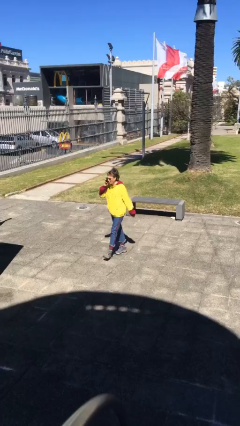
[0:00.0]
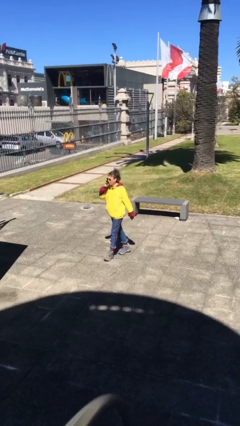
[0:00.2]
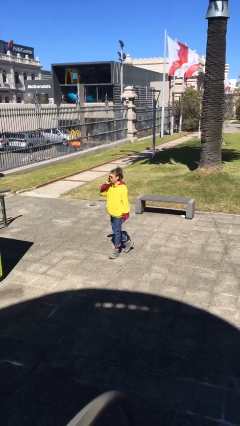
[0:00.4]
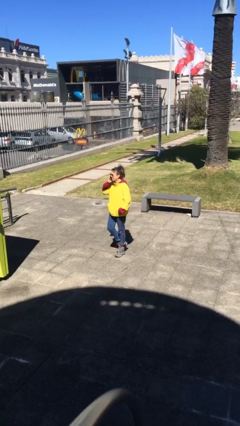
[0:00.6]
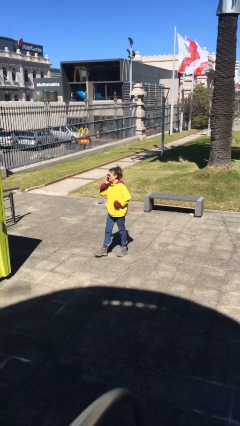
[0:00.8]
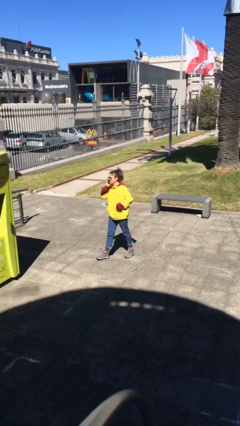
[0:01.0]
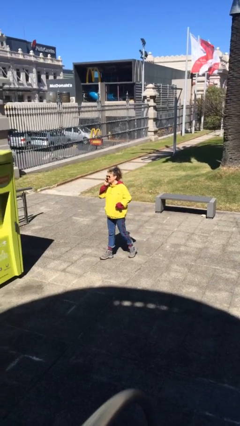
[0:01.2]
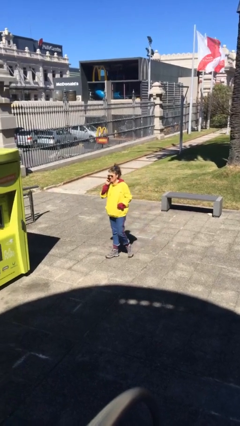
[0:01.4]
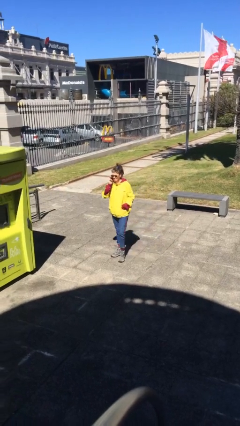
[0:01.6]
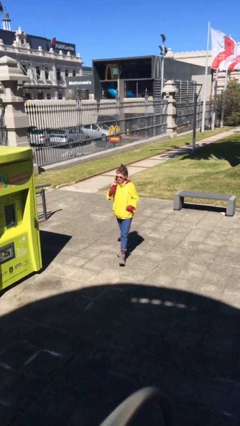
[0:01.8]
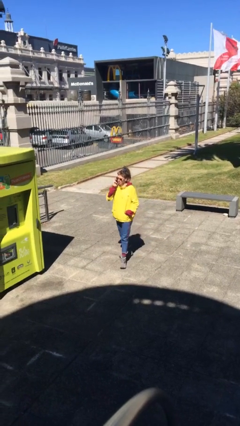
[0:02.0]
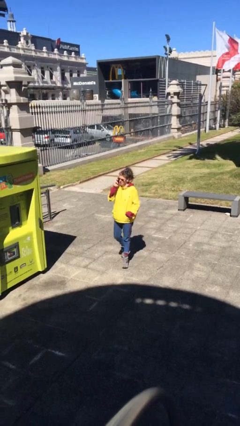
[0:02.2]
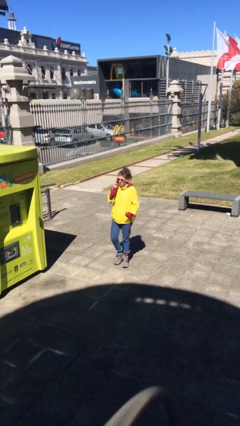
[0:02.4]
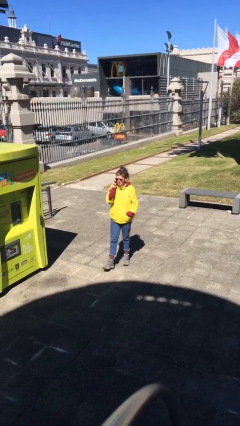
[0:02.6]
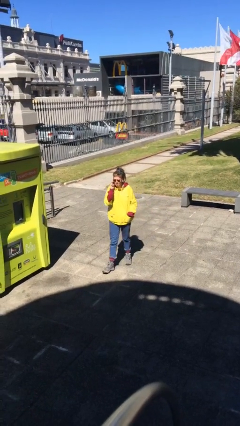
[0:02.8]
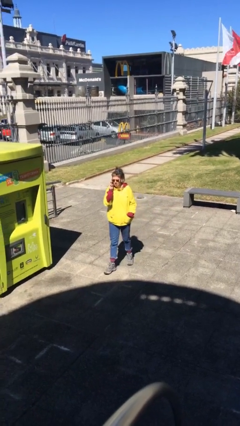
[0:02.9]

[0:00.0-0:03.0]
person talks on phone

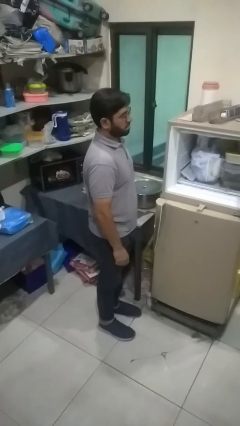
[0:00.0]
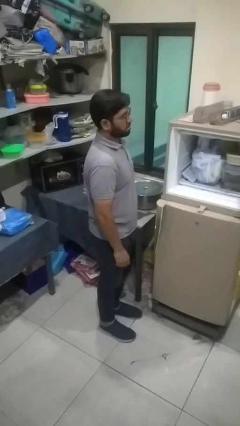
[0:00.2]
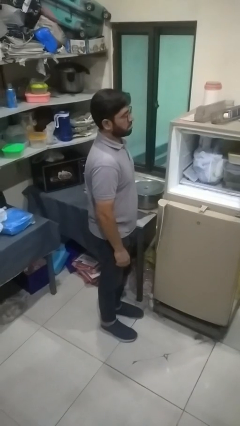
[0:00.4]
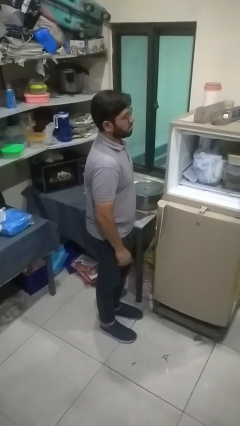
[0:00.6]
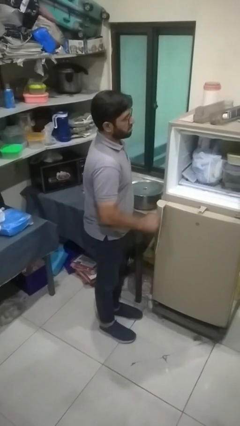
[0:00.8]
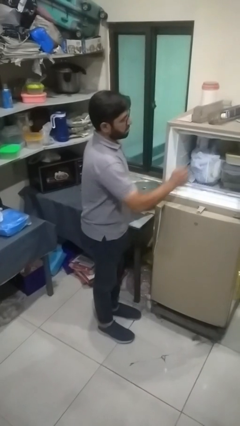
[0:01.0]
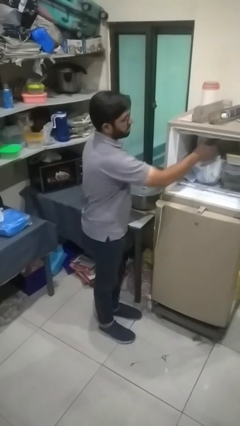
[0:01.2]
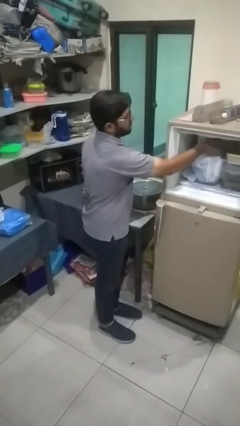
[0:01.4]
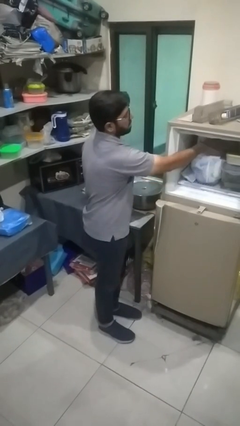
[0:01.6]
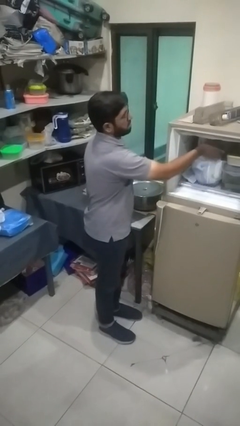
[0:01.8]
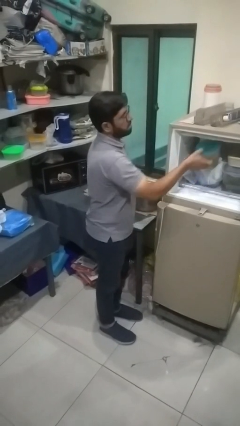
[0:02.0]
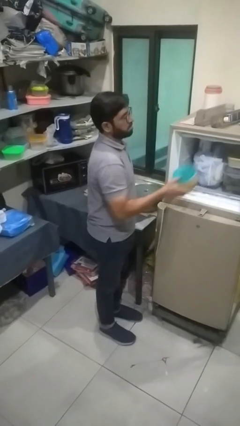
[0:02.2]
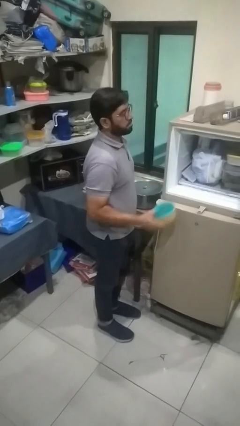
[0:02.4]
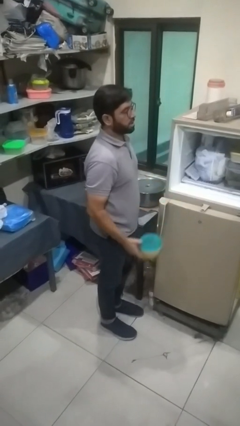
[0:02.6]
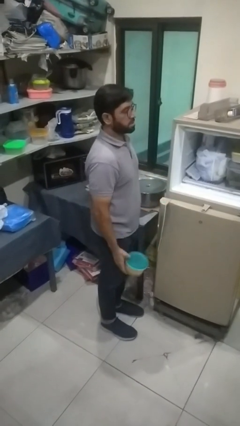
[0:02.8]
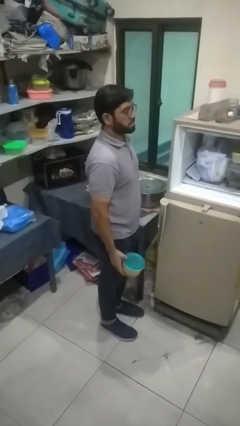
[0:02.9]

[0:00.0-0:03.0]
person takes object from refrigerator

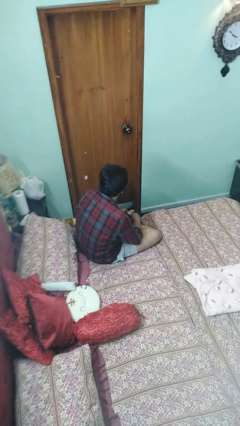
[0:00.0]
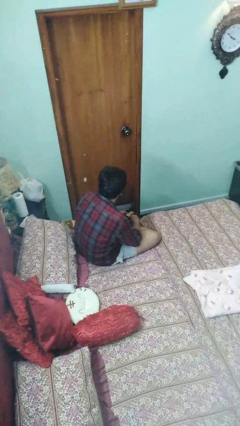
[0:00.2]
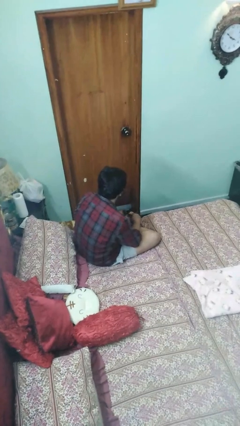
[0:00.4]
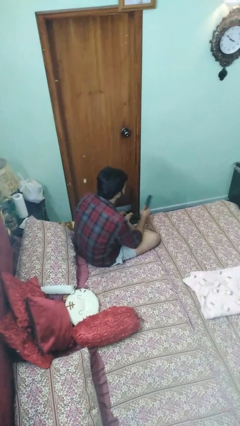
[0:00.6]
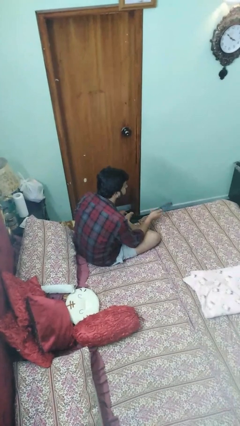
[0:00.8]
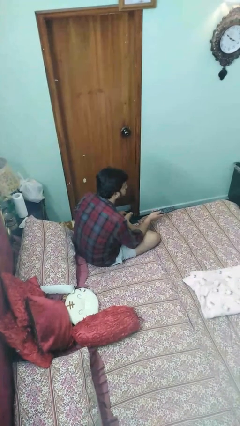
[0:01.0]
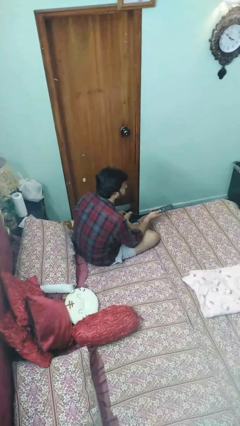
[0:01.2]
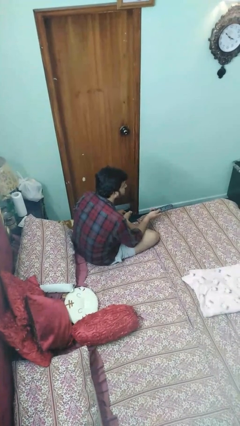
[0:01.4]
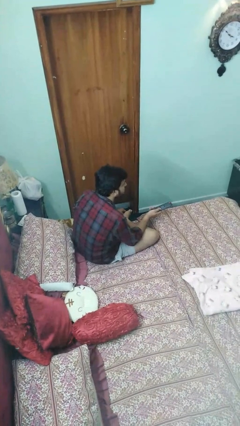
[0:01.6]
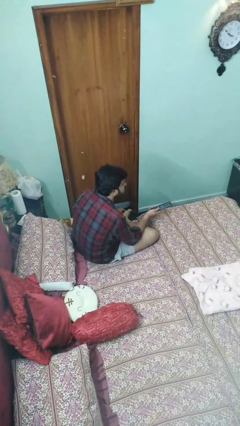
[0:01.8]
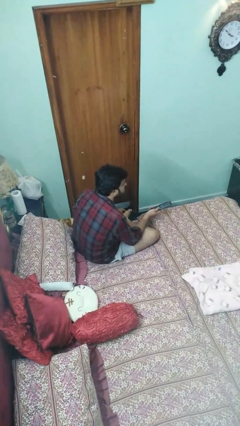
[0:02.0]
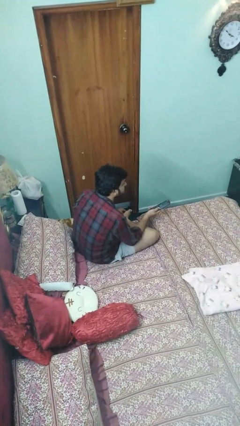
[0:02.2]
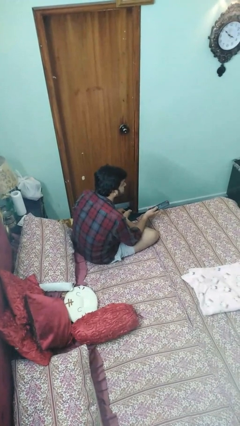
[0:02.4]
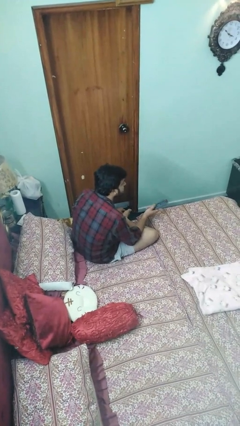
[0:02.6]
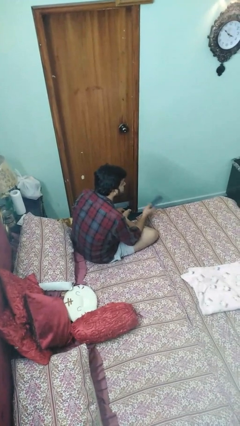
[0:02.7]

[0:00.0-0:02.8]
person uses television remote

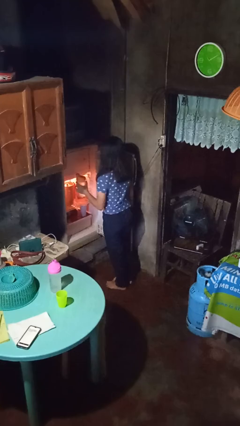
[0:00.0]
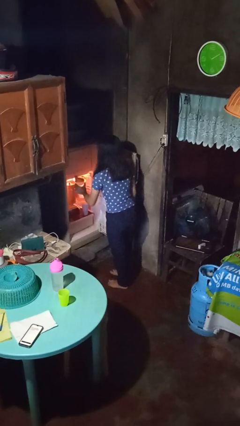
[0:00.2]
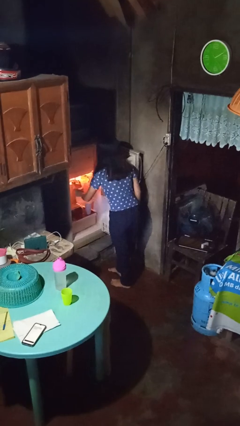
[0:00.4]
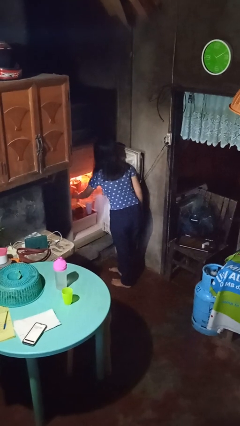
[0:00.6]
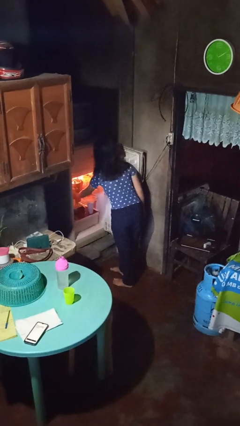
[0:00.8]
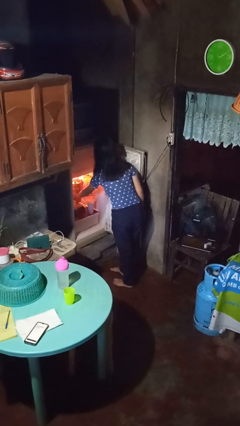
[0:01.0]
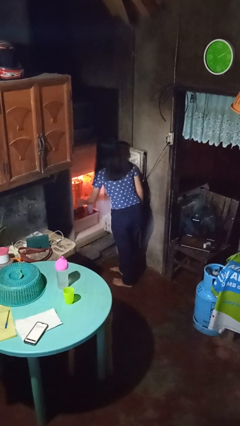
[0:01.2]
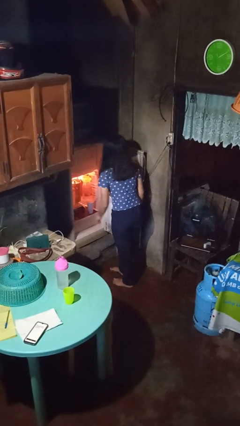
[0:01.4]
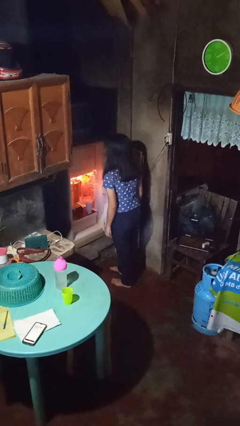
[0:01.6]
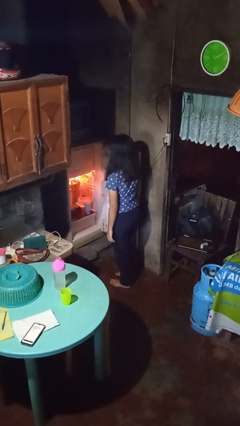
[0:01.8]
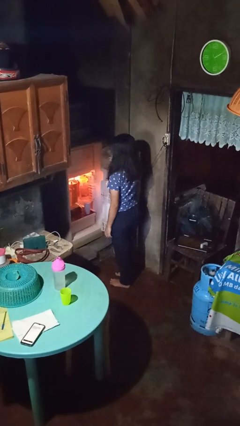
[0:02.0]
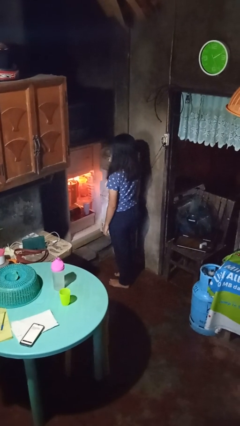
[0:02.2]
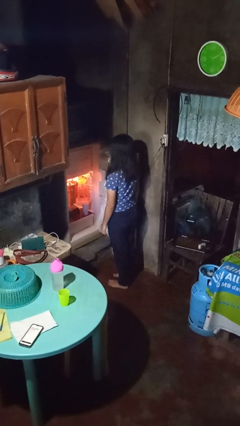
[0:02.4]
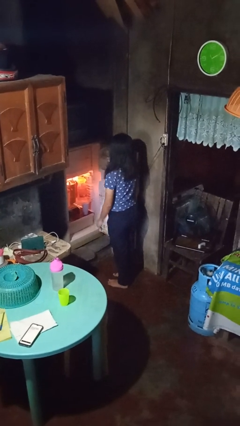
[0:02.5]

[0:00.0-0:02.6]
person puts object into refrigerator

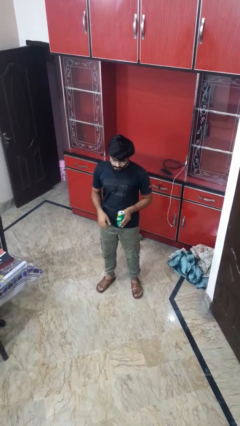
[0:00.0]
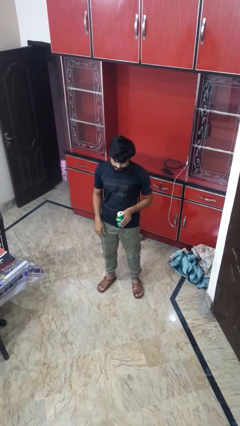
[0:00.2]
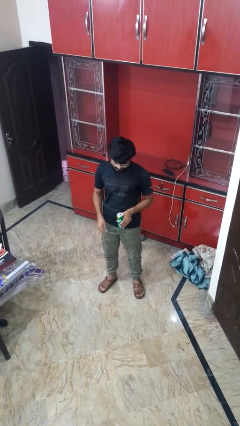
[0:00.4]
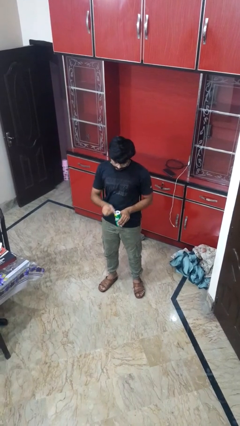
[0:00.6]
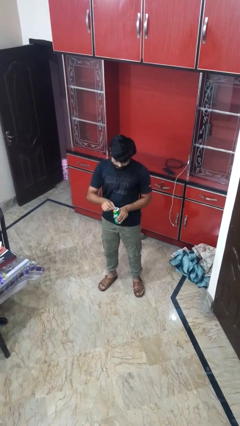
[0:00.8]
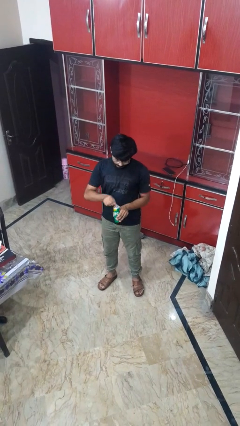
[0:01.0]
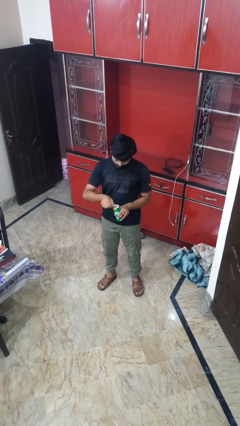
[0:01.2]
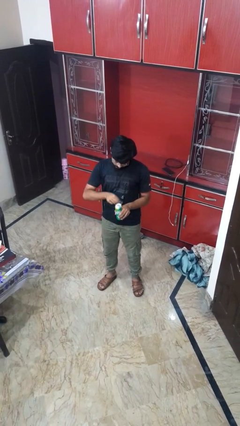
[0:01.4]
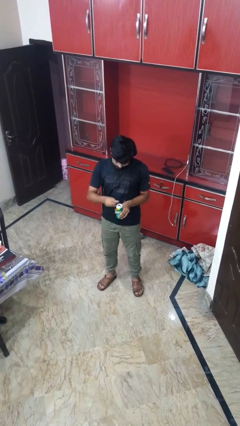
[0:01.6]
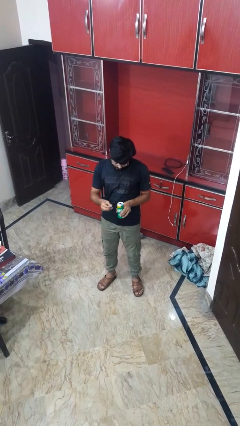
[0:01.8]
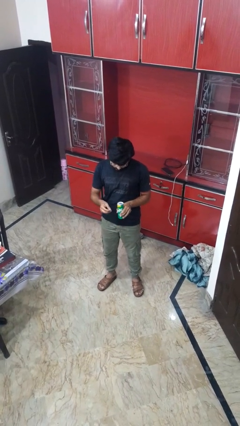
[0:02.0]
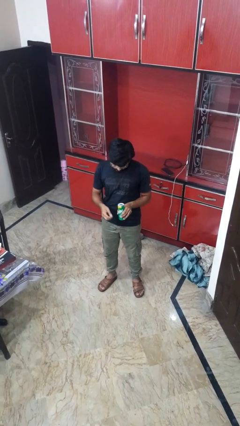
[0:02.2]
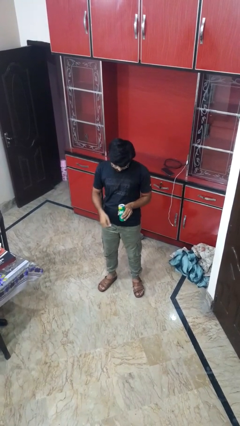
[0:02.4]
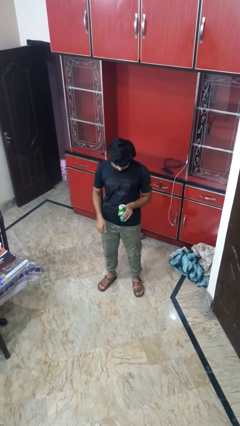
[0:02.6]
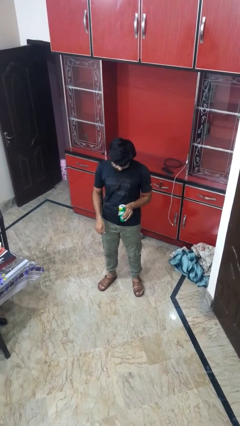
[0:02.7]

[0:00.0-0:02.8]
person opens beverage can

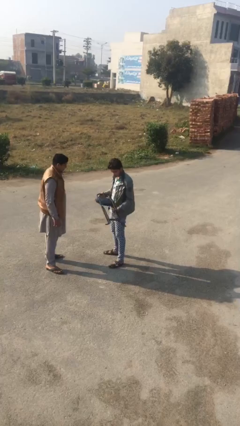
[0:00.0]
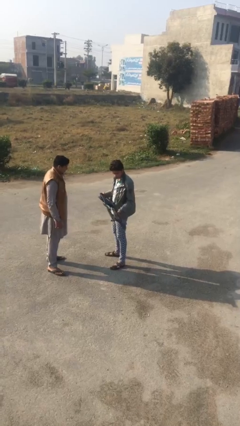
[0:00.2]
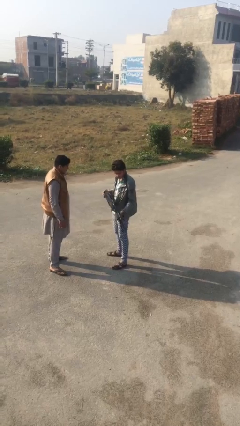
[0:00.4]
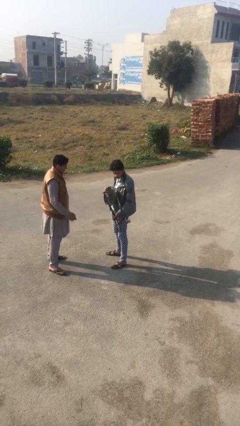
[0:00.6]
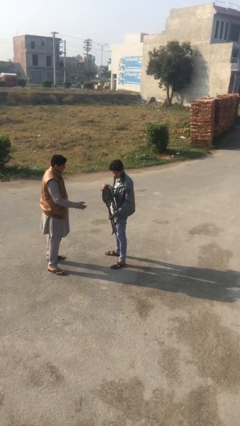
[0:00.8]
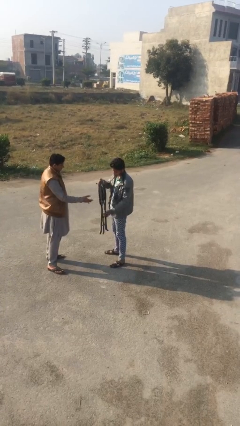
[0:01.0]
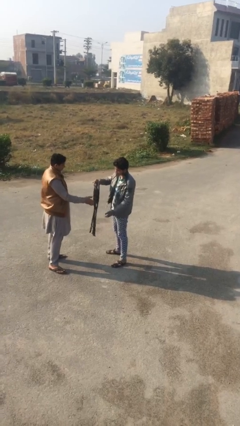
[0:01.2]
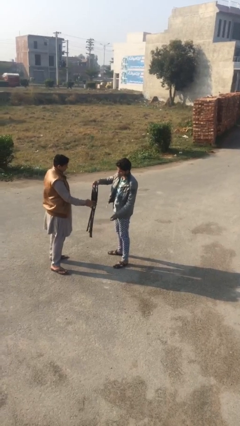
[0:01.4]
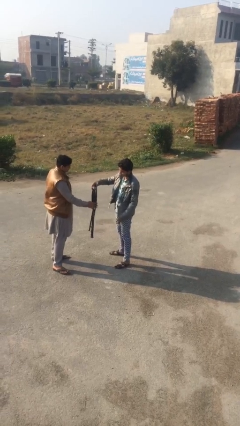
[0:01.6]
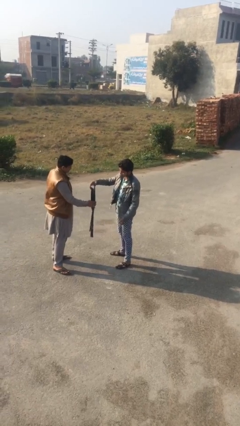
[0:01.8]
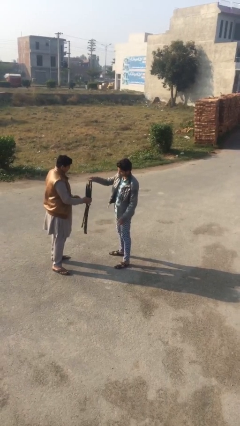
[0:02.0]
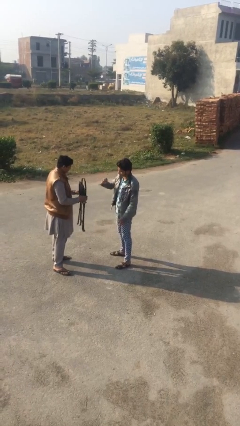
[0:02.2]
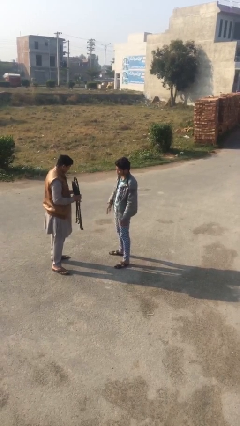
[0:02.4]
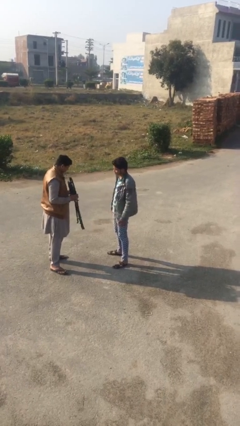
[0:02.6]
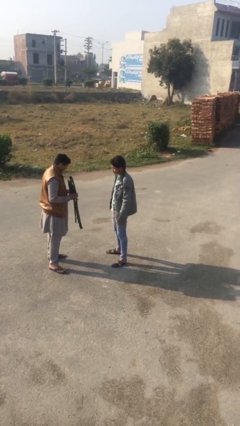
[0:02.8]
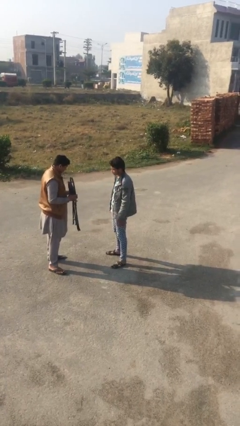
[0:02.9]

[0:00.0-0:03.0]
person transfers object to person
